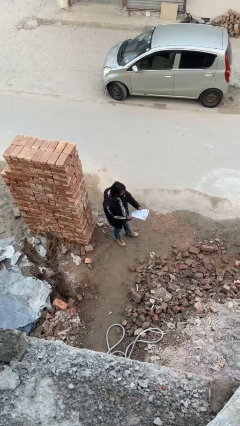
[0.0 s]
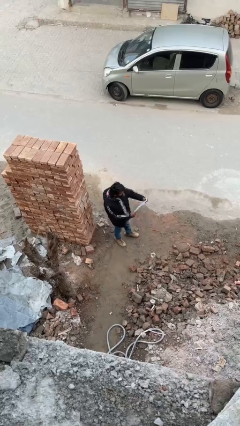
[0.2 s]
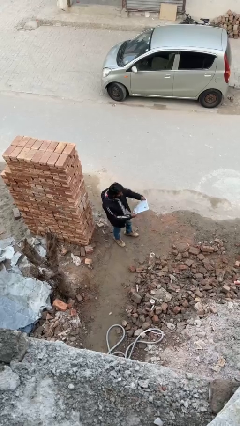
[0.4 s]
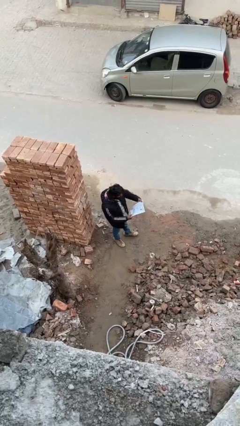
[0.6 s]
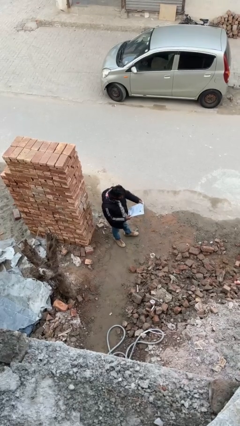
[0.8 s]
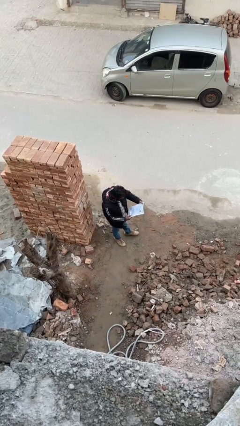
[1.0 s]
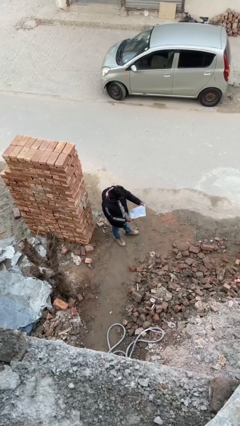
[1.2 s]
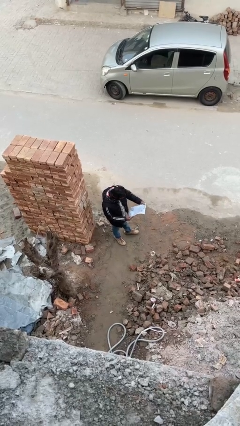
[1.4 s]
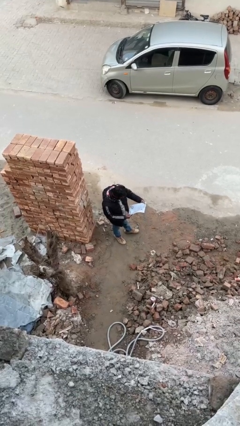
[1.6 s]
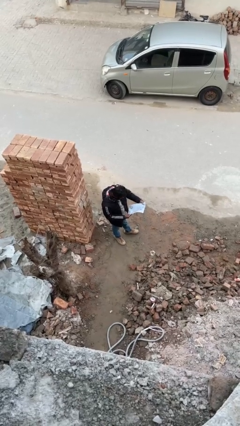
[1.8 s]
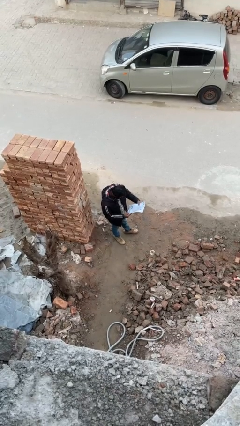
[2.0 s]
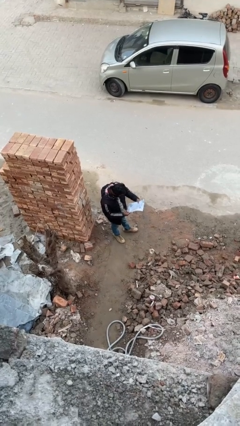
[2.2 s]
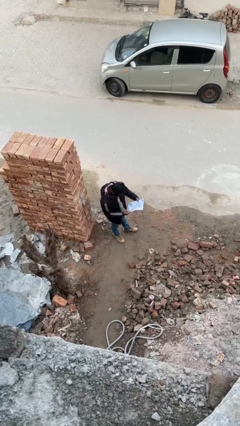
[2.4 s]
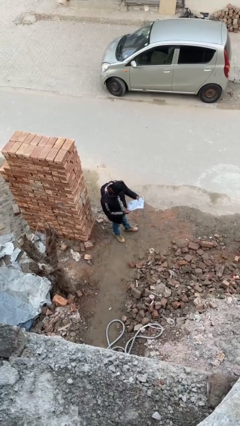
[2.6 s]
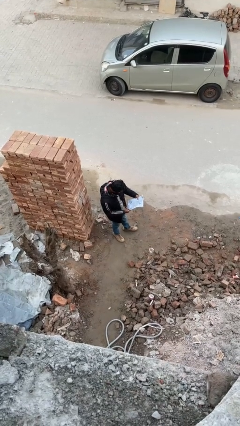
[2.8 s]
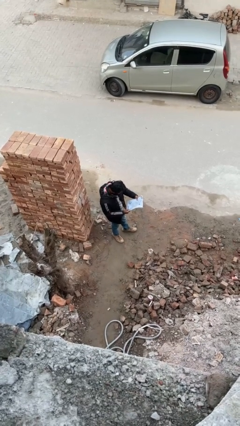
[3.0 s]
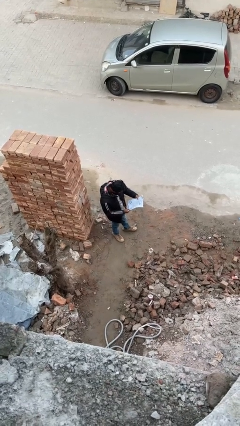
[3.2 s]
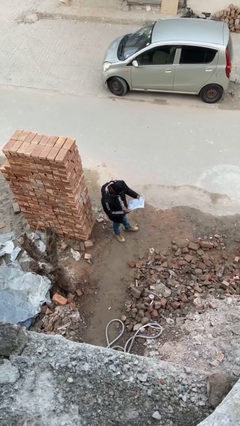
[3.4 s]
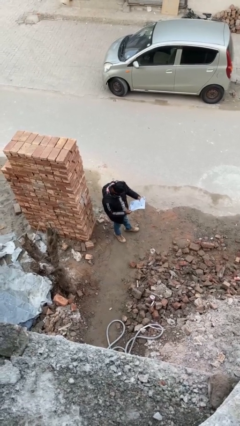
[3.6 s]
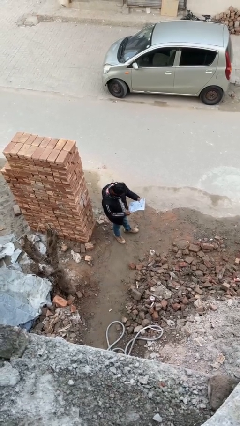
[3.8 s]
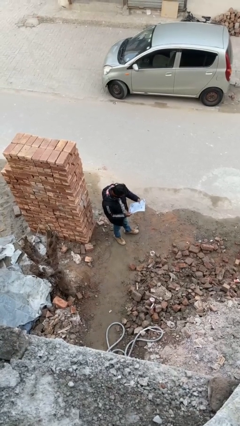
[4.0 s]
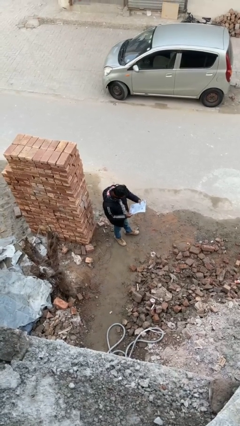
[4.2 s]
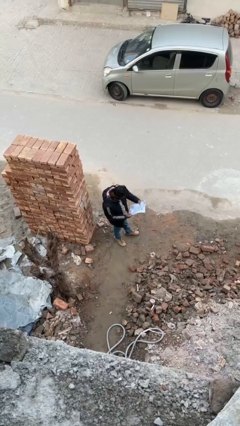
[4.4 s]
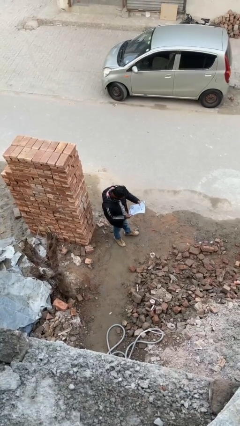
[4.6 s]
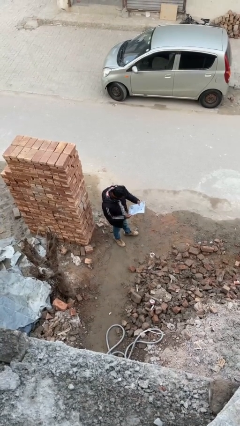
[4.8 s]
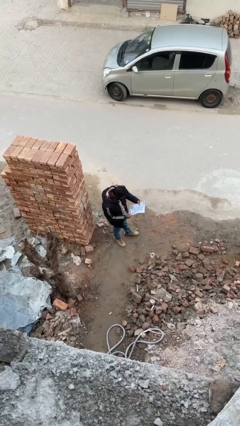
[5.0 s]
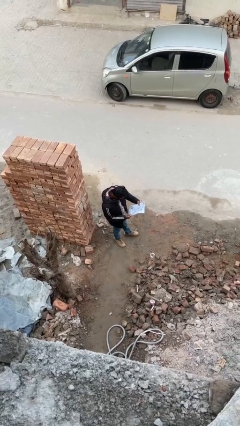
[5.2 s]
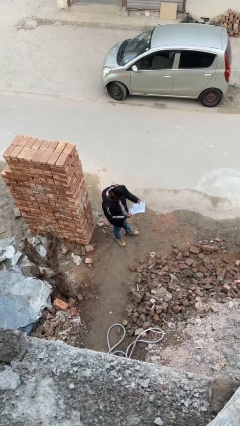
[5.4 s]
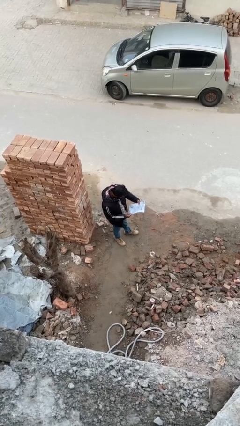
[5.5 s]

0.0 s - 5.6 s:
person reads document

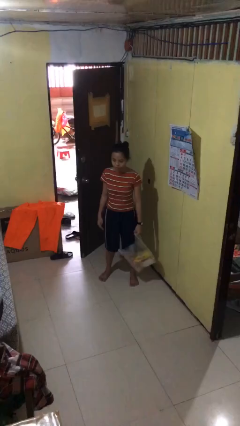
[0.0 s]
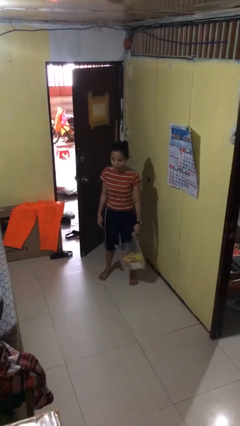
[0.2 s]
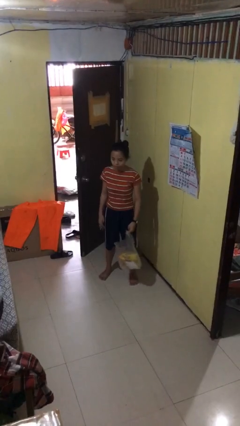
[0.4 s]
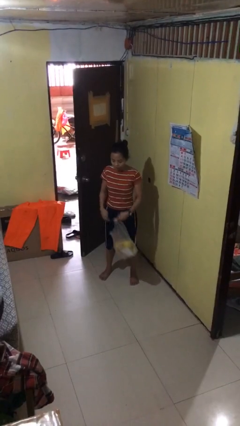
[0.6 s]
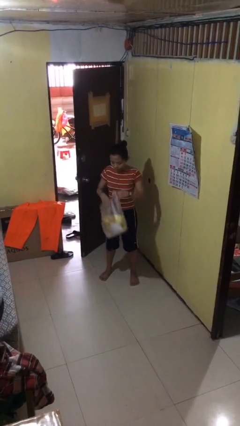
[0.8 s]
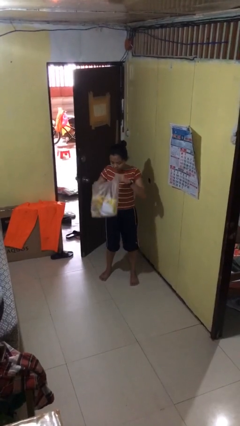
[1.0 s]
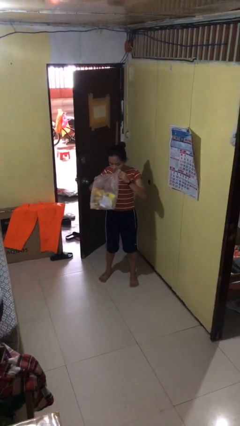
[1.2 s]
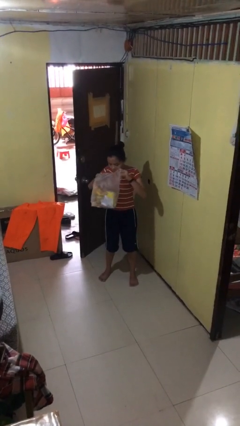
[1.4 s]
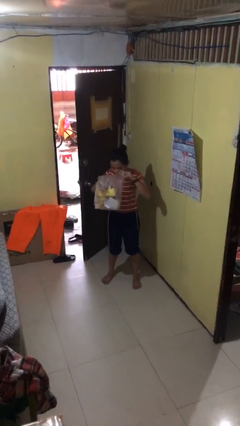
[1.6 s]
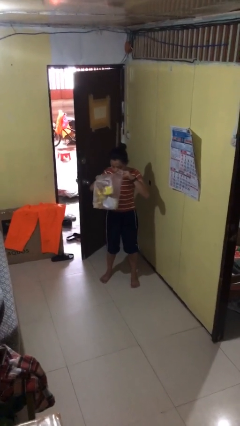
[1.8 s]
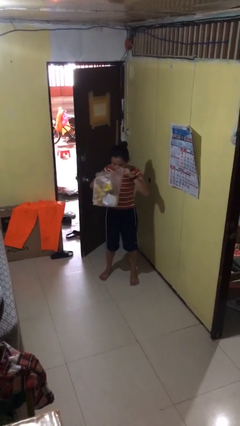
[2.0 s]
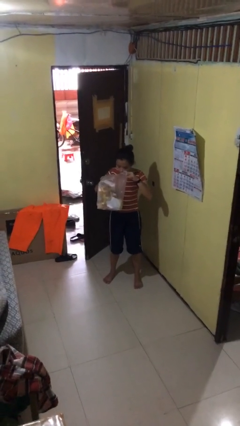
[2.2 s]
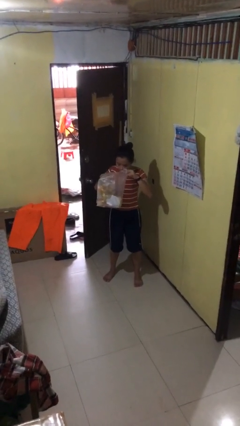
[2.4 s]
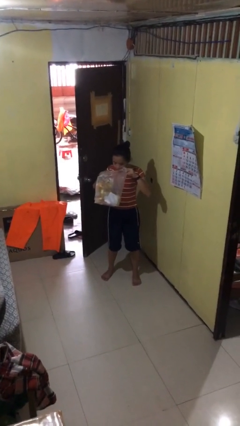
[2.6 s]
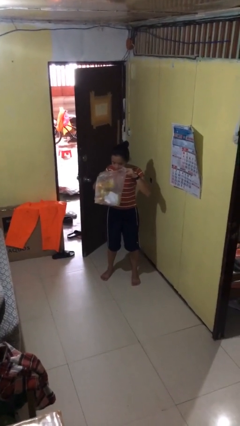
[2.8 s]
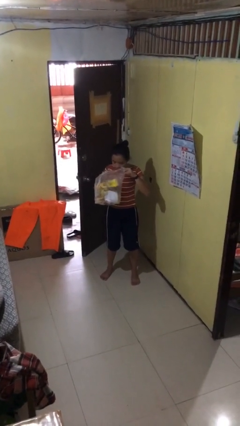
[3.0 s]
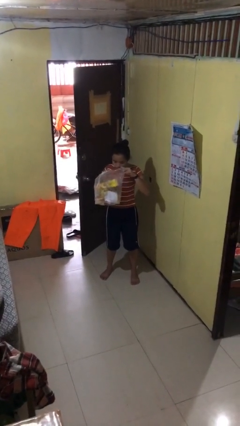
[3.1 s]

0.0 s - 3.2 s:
person searches in bag

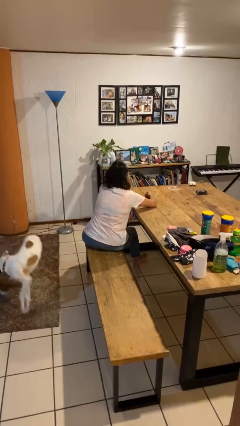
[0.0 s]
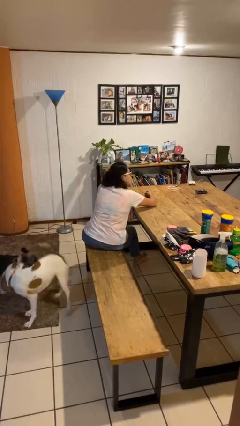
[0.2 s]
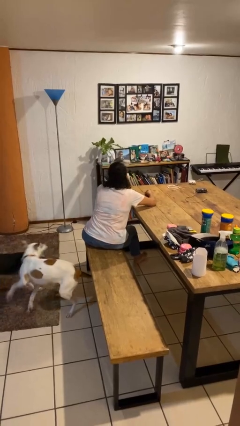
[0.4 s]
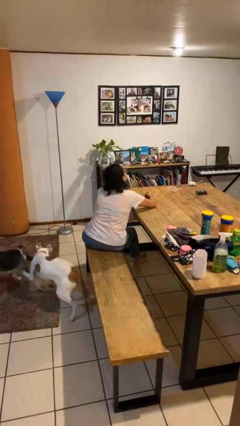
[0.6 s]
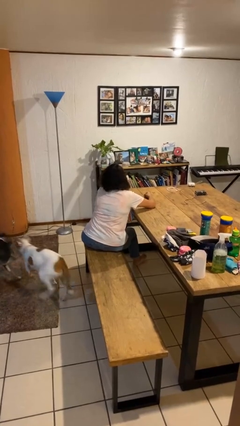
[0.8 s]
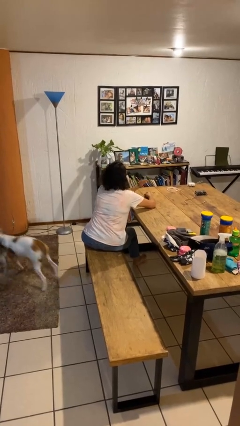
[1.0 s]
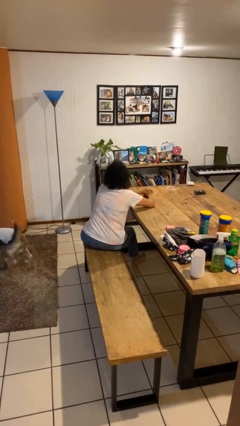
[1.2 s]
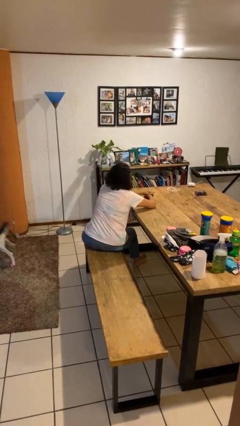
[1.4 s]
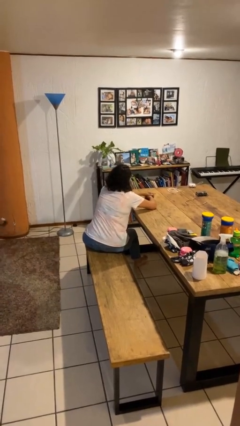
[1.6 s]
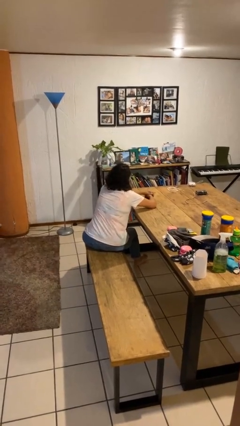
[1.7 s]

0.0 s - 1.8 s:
person shakes head

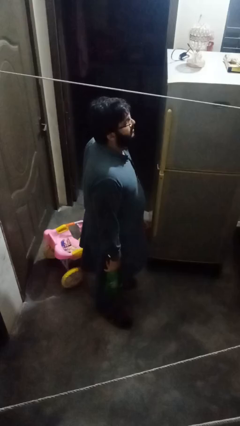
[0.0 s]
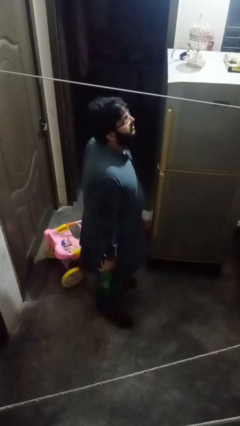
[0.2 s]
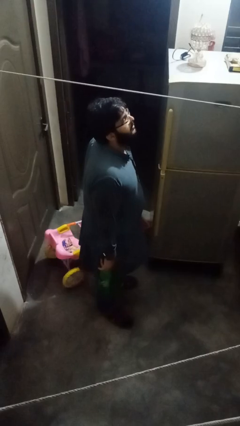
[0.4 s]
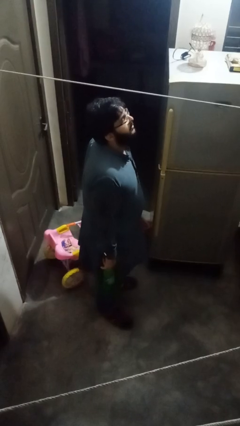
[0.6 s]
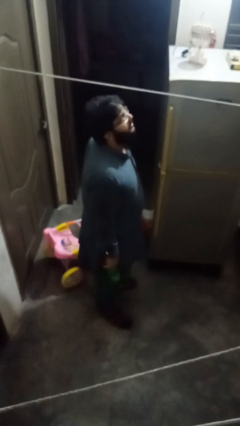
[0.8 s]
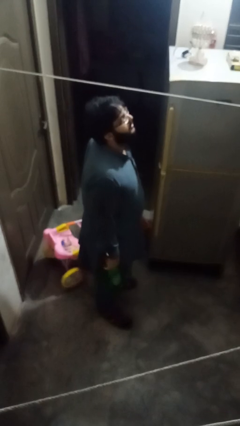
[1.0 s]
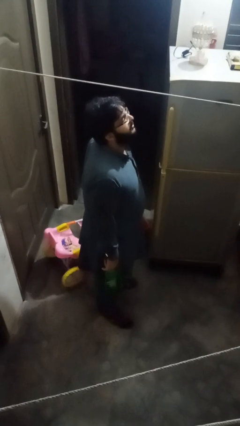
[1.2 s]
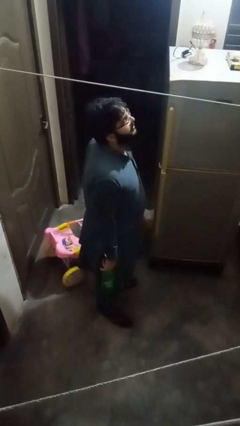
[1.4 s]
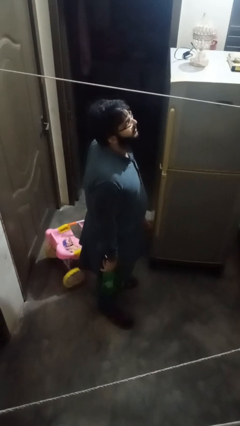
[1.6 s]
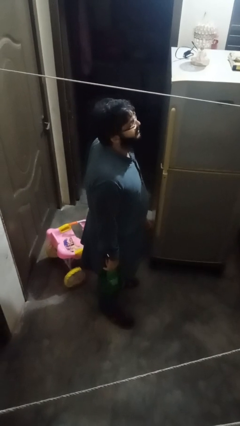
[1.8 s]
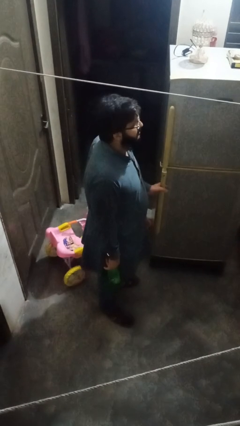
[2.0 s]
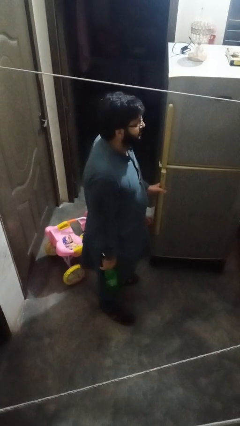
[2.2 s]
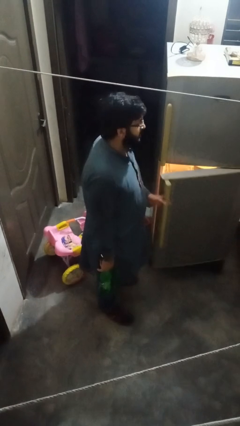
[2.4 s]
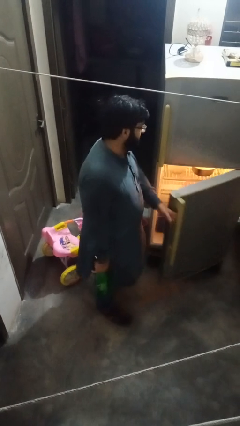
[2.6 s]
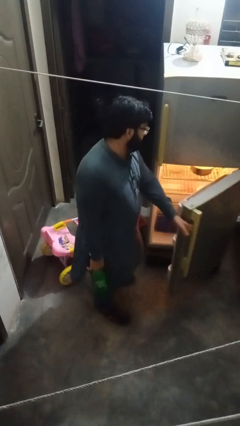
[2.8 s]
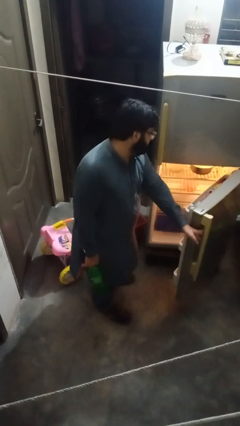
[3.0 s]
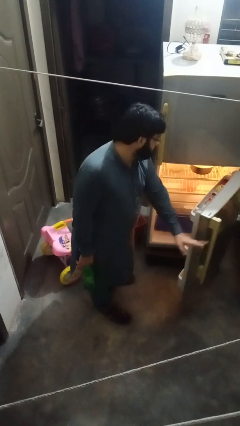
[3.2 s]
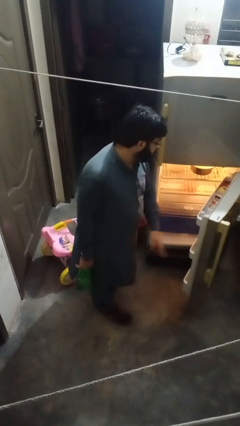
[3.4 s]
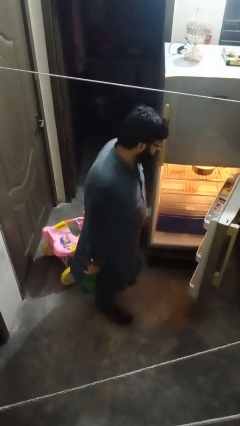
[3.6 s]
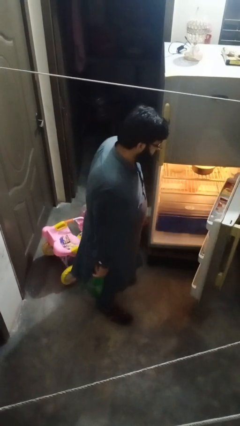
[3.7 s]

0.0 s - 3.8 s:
person opens refrigerator

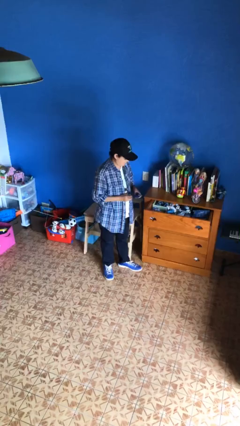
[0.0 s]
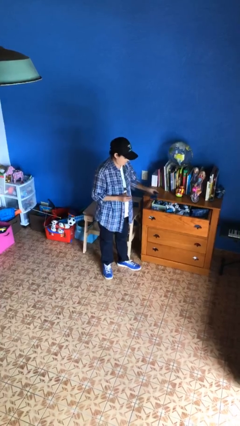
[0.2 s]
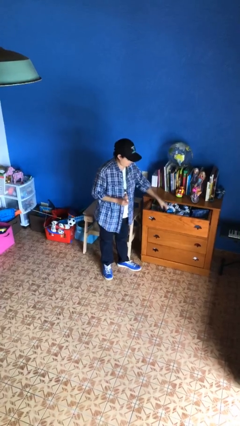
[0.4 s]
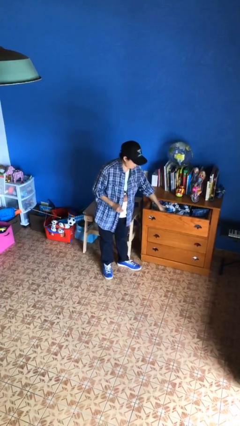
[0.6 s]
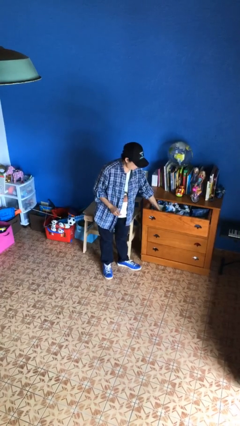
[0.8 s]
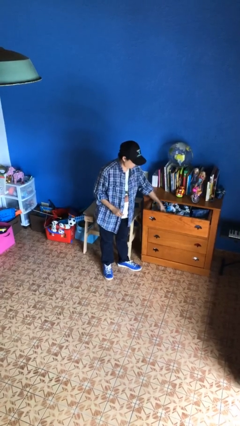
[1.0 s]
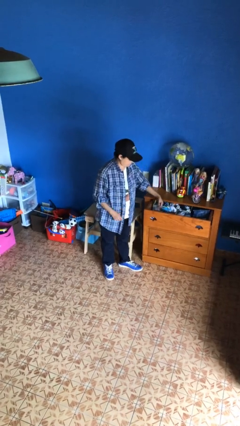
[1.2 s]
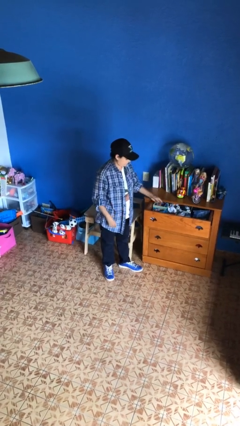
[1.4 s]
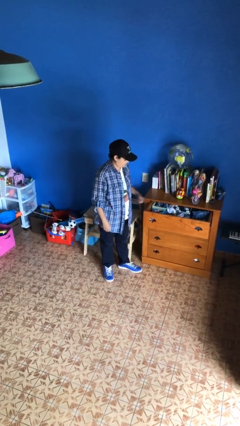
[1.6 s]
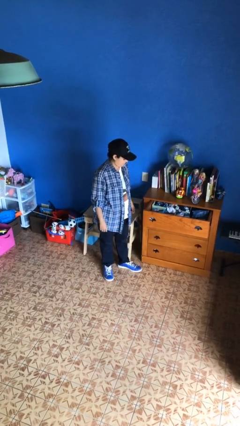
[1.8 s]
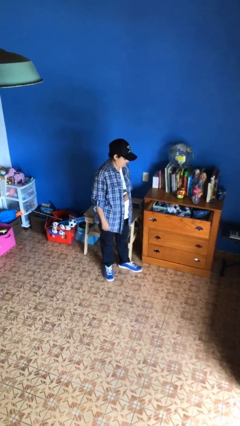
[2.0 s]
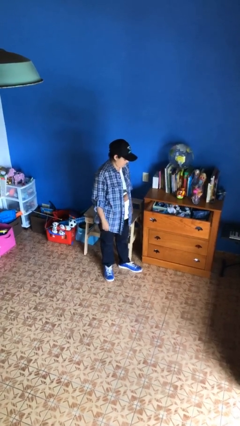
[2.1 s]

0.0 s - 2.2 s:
person puts clothes into dresser

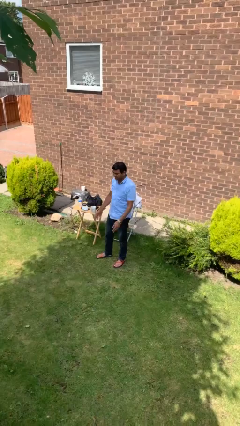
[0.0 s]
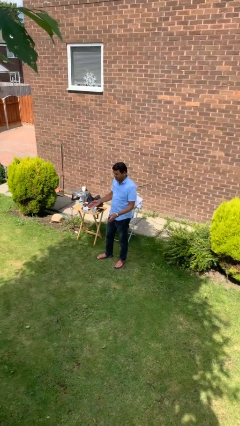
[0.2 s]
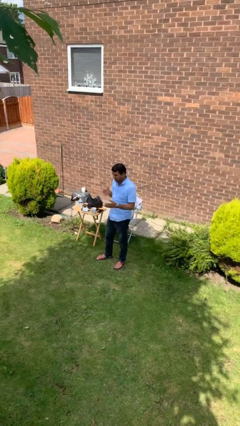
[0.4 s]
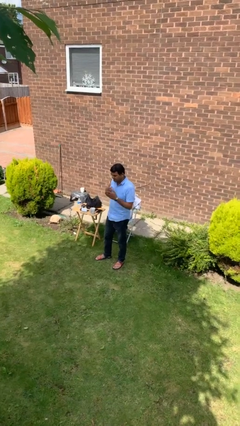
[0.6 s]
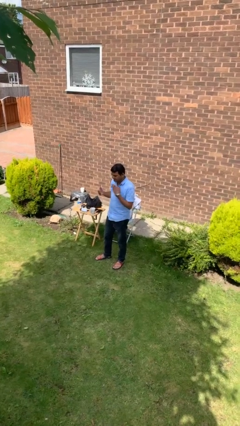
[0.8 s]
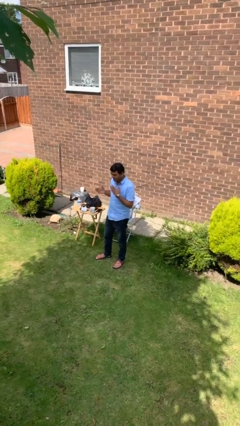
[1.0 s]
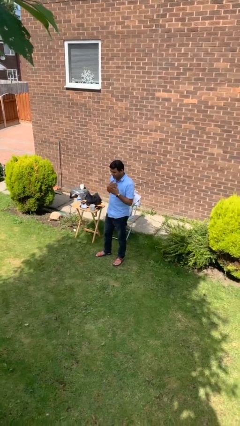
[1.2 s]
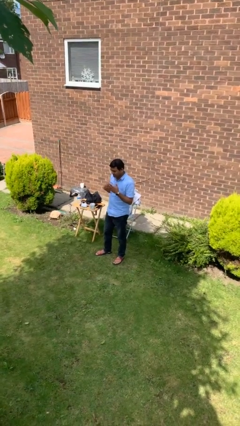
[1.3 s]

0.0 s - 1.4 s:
person drums on chest
